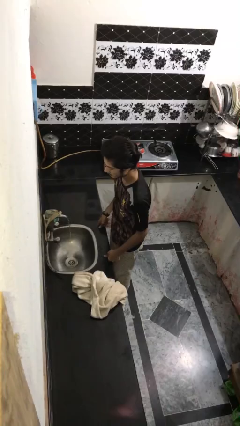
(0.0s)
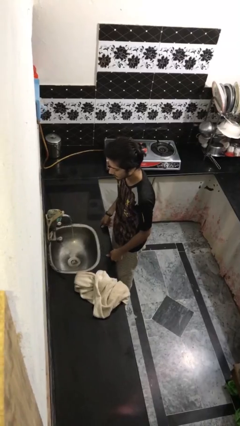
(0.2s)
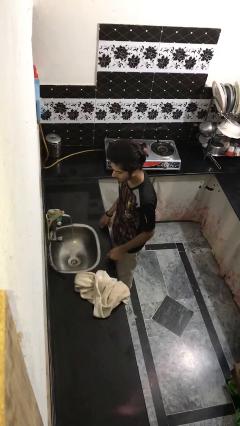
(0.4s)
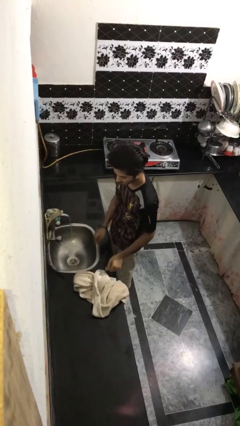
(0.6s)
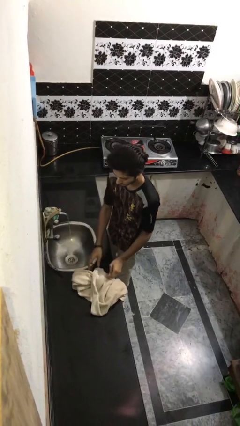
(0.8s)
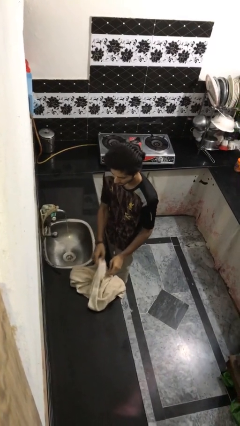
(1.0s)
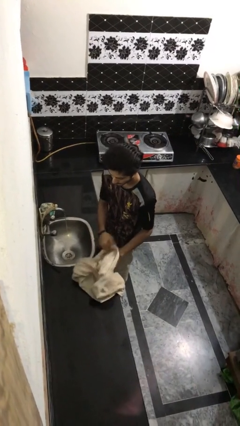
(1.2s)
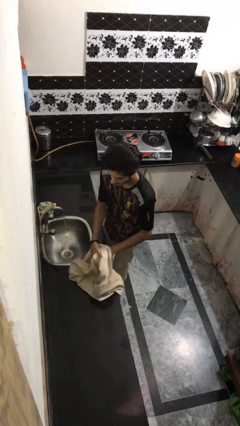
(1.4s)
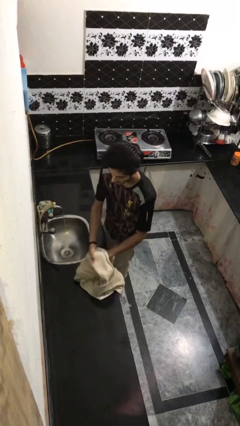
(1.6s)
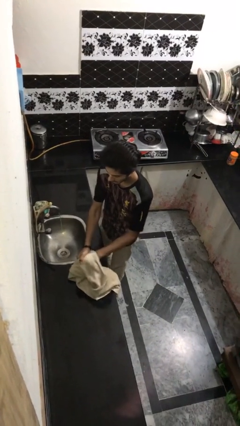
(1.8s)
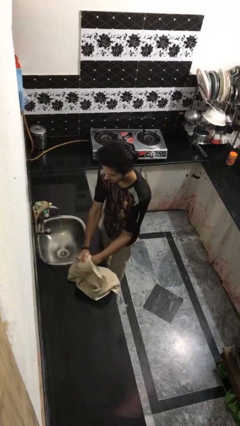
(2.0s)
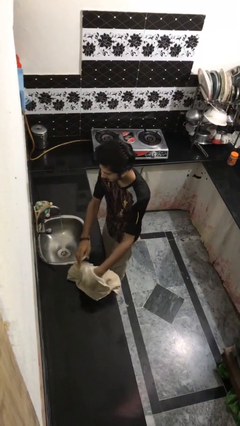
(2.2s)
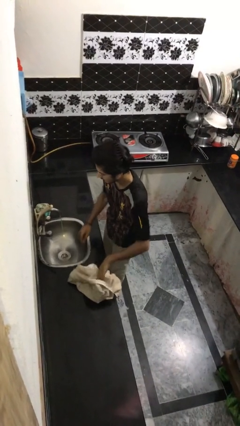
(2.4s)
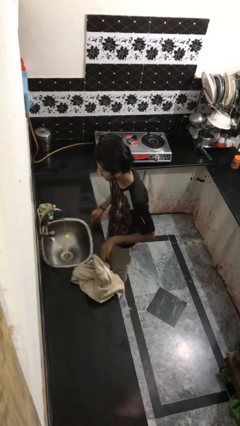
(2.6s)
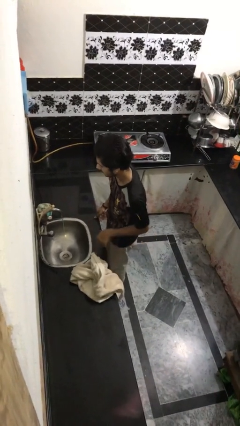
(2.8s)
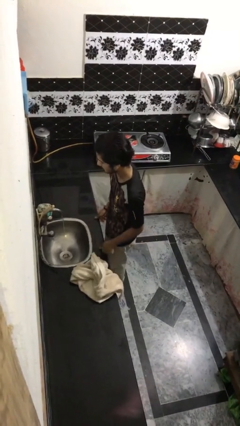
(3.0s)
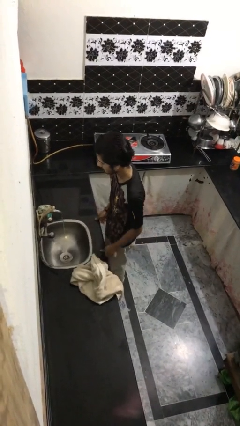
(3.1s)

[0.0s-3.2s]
person dries face with towel

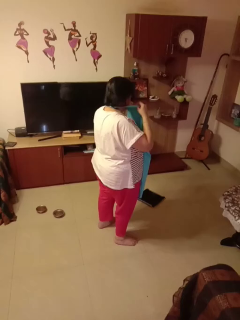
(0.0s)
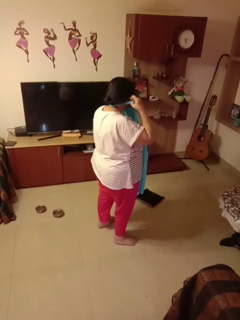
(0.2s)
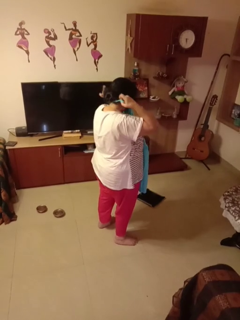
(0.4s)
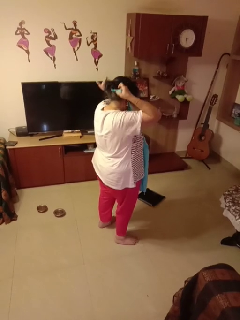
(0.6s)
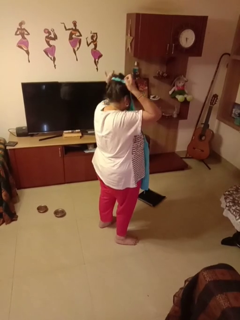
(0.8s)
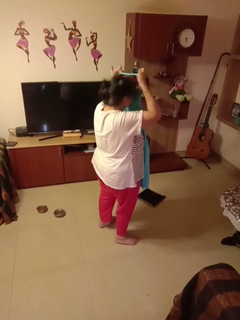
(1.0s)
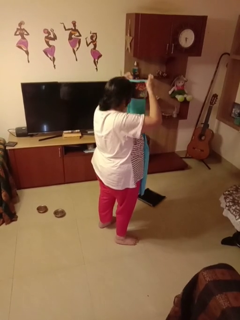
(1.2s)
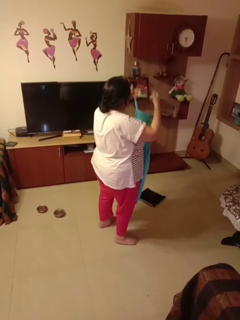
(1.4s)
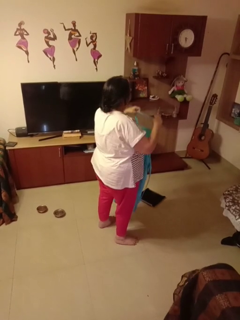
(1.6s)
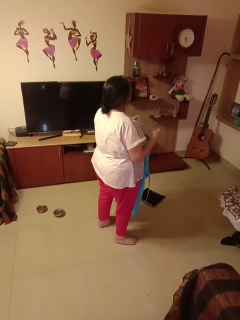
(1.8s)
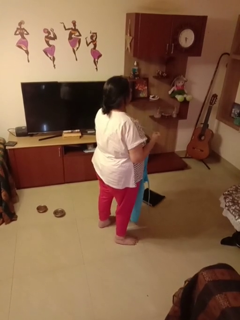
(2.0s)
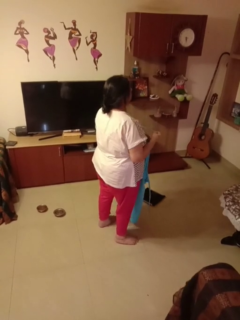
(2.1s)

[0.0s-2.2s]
person takes off apron

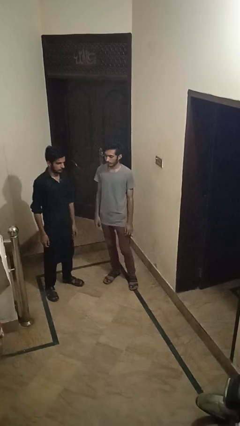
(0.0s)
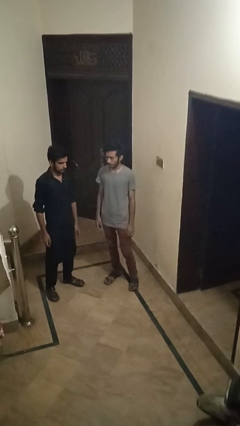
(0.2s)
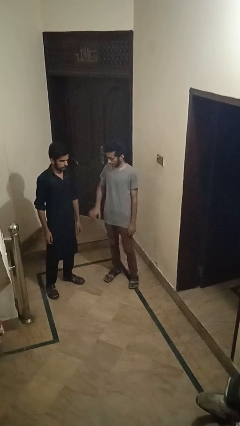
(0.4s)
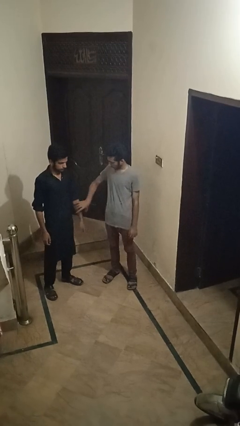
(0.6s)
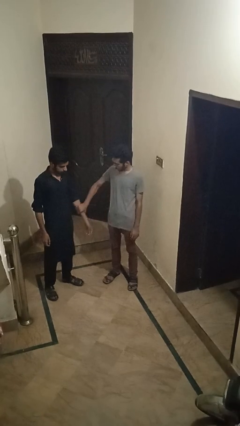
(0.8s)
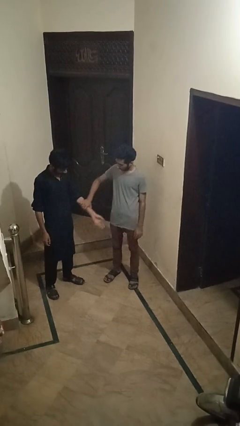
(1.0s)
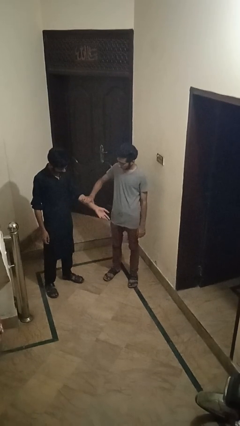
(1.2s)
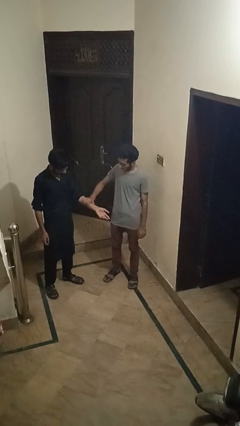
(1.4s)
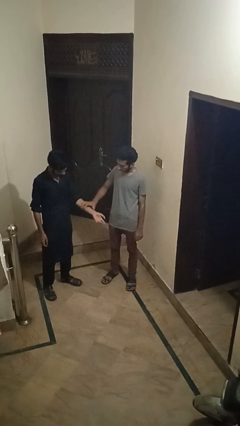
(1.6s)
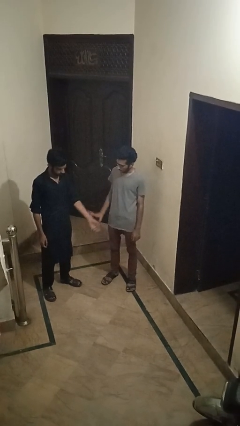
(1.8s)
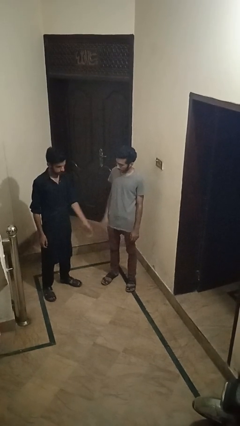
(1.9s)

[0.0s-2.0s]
person grabs person by forearm

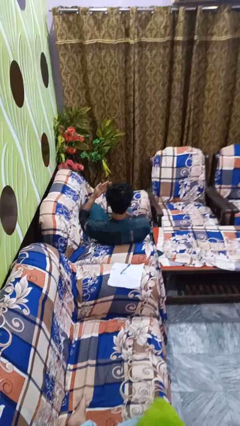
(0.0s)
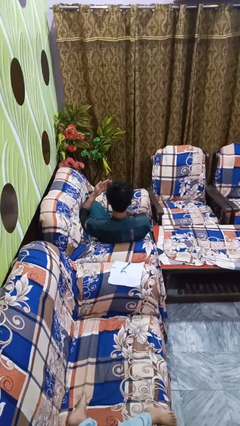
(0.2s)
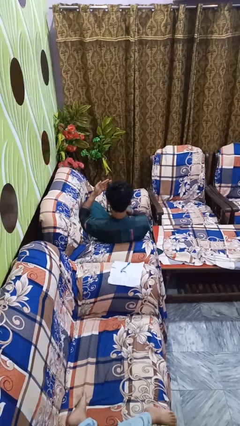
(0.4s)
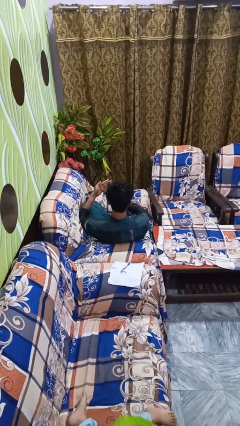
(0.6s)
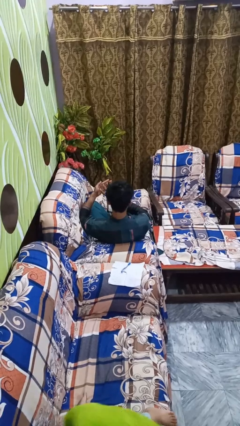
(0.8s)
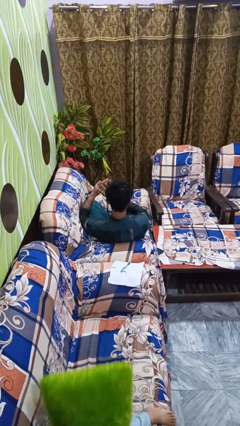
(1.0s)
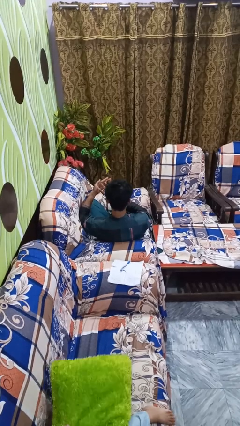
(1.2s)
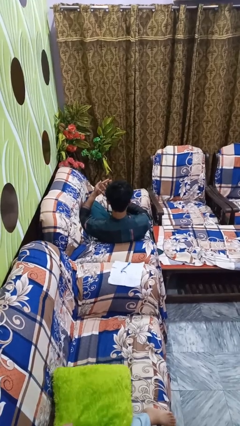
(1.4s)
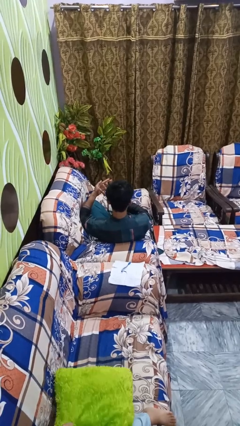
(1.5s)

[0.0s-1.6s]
person gestures number three

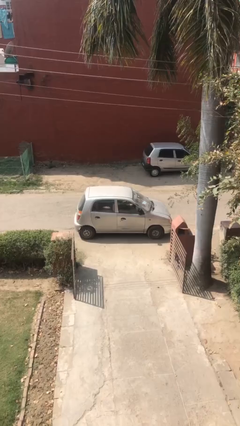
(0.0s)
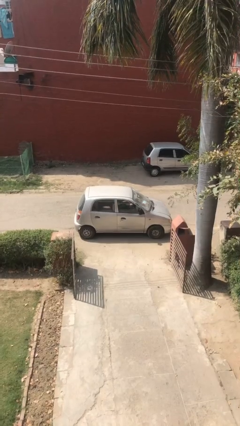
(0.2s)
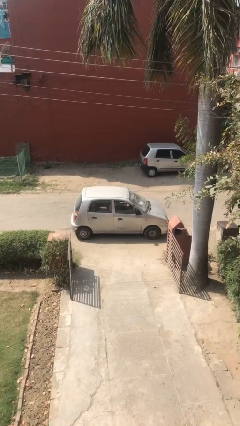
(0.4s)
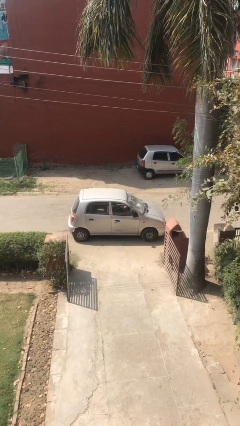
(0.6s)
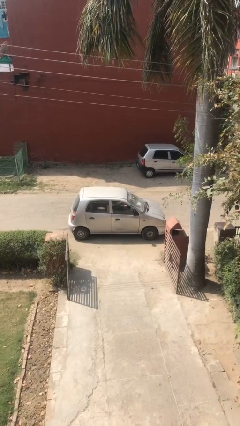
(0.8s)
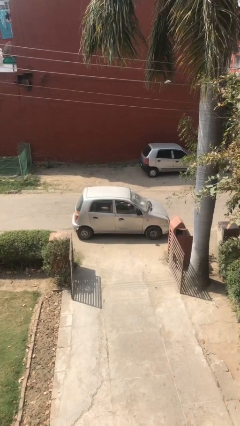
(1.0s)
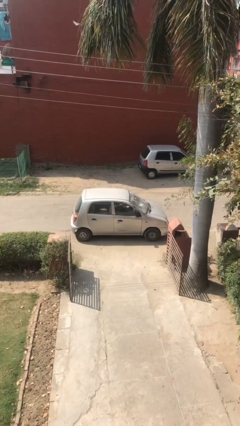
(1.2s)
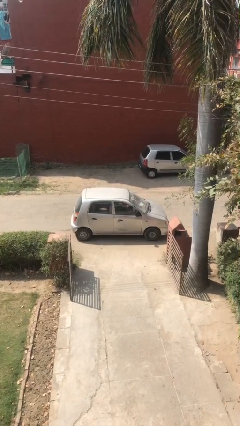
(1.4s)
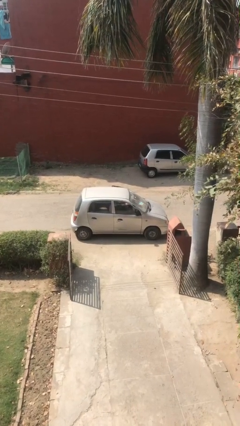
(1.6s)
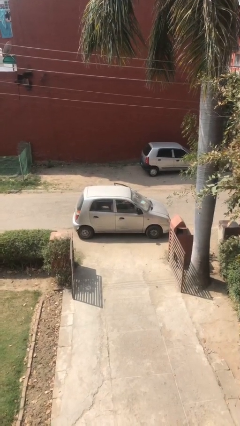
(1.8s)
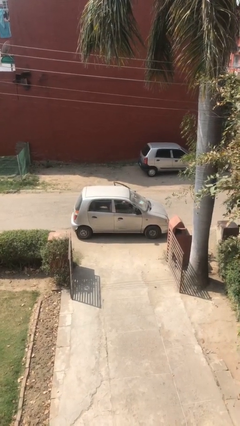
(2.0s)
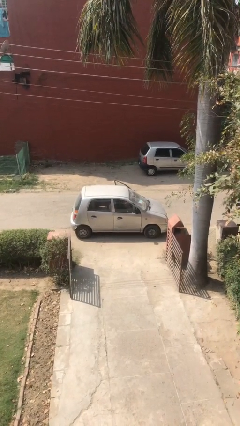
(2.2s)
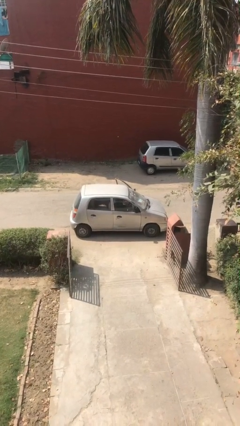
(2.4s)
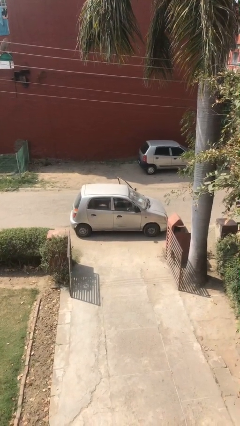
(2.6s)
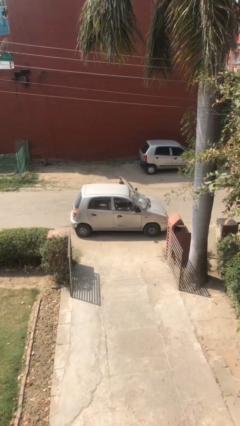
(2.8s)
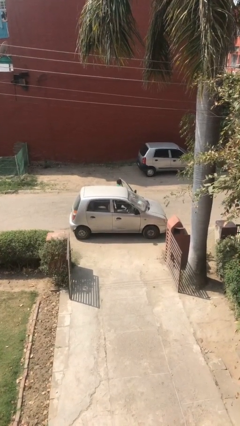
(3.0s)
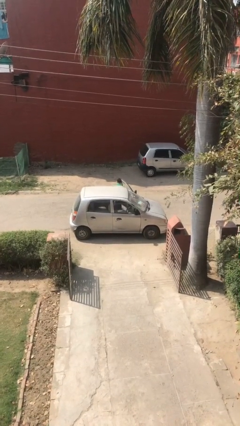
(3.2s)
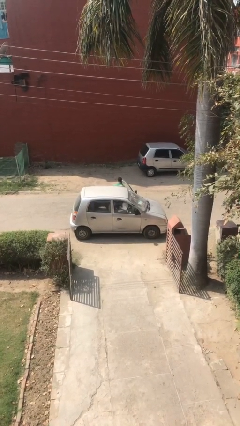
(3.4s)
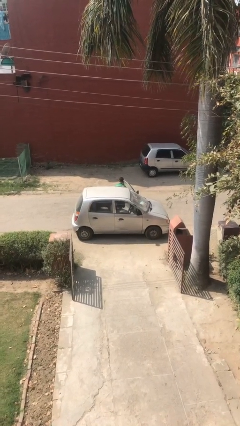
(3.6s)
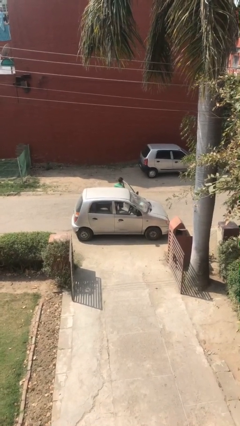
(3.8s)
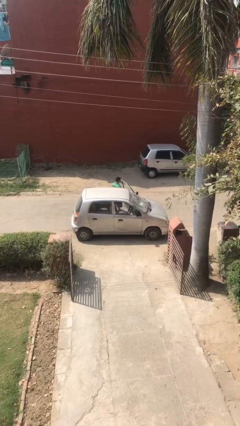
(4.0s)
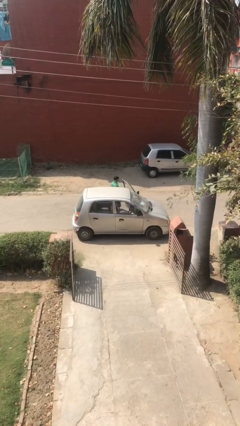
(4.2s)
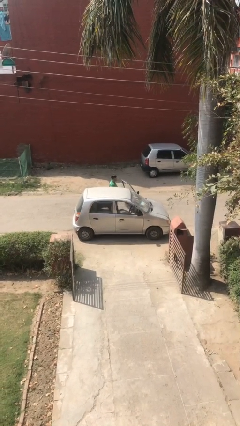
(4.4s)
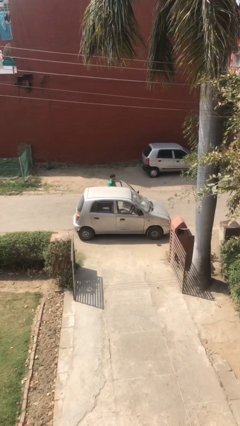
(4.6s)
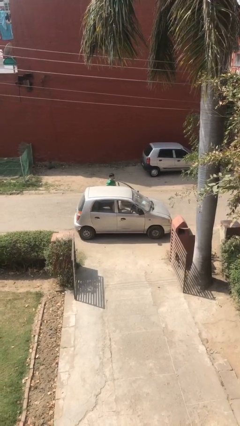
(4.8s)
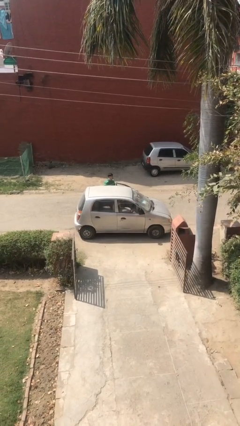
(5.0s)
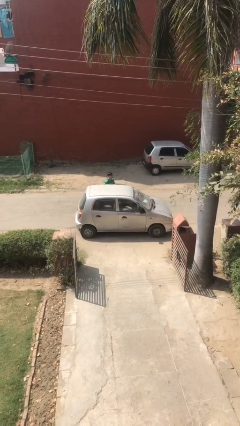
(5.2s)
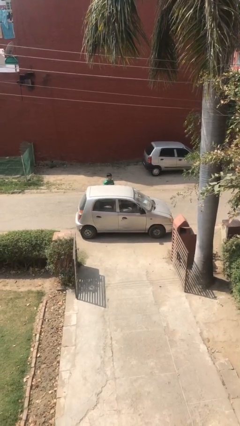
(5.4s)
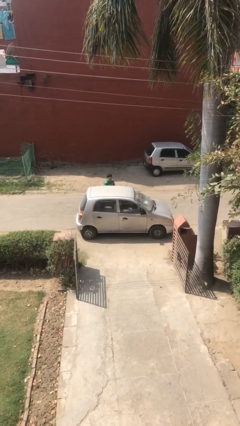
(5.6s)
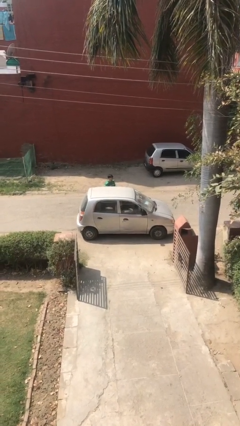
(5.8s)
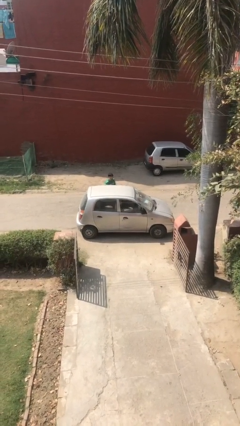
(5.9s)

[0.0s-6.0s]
car drops off person

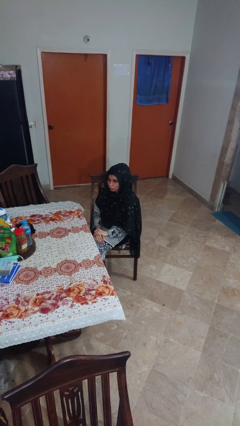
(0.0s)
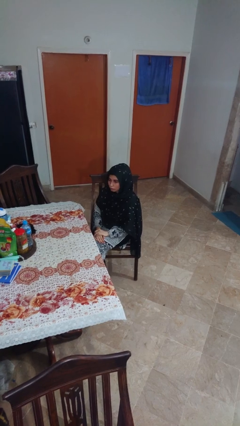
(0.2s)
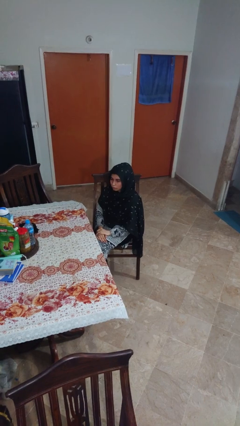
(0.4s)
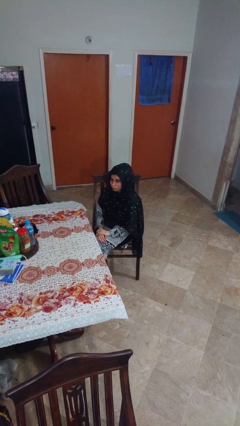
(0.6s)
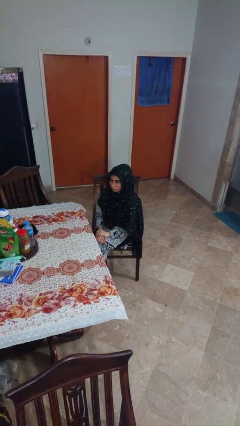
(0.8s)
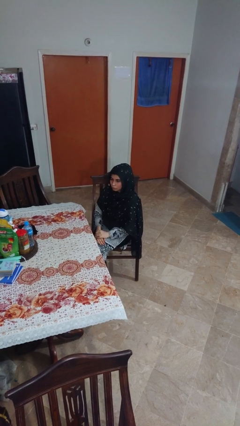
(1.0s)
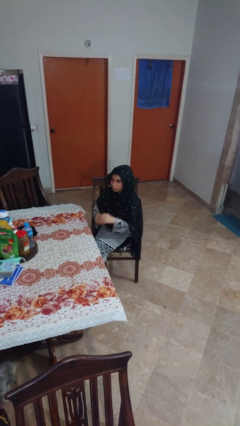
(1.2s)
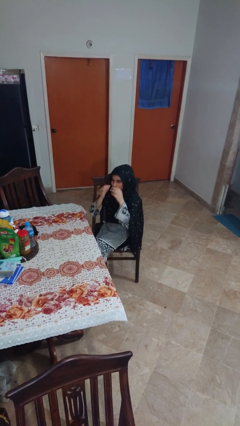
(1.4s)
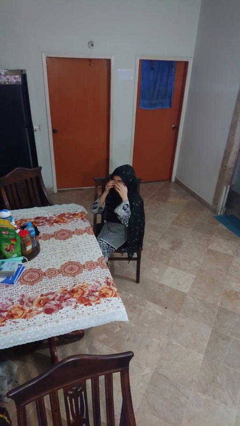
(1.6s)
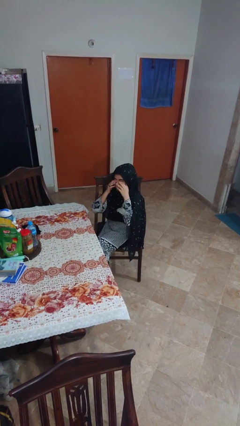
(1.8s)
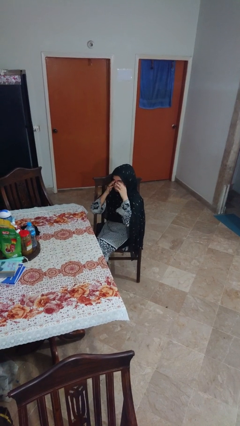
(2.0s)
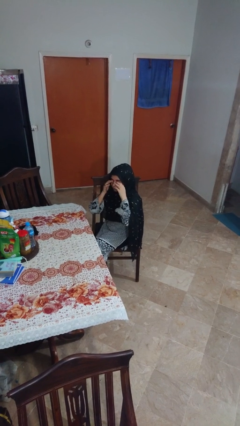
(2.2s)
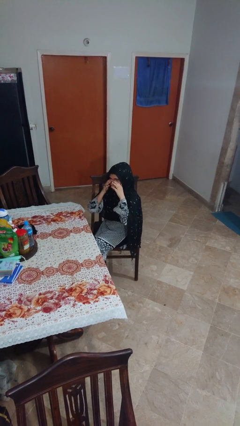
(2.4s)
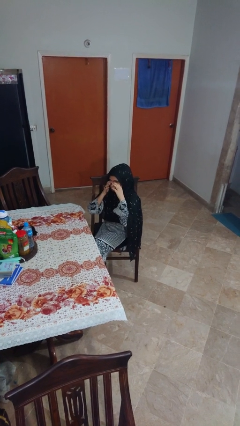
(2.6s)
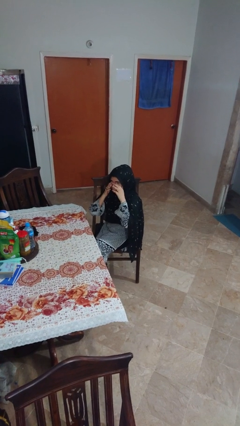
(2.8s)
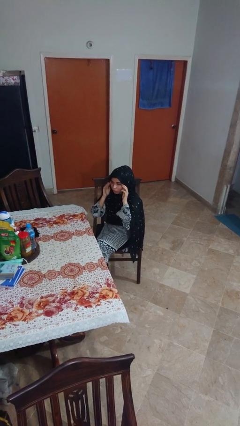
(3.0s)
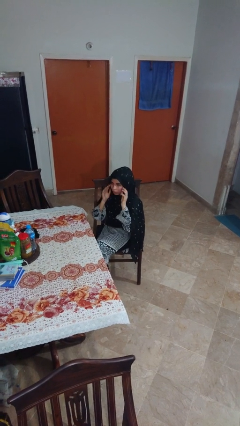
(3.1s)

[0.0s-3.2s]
person rubs eyes
